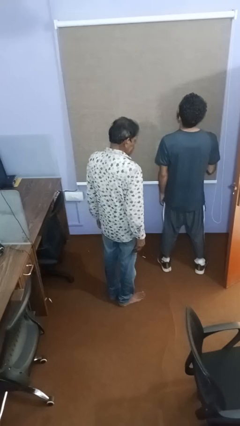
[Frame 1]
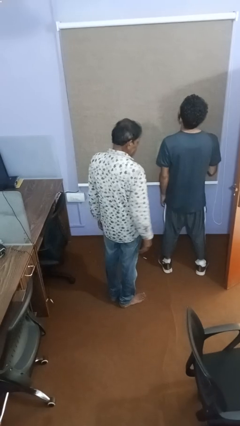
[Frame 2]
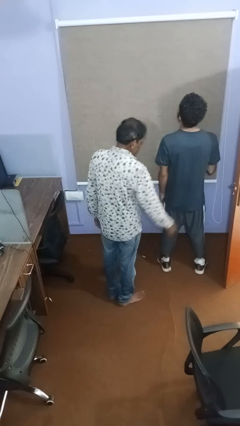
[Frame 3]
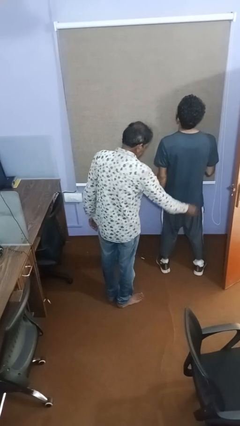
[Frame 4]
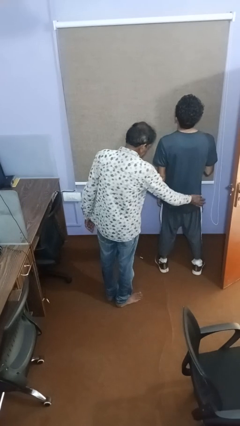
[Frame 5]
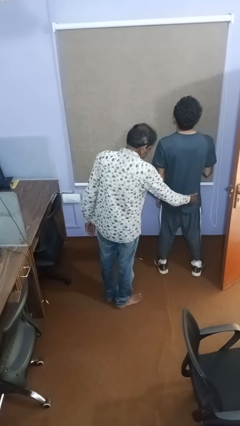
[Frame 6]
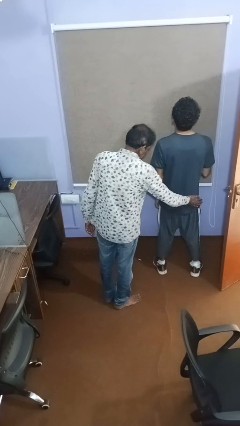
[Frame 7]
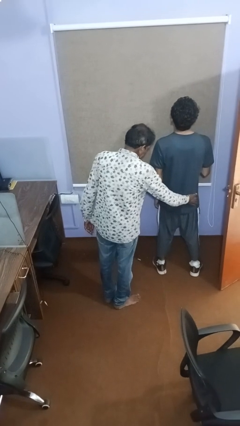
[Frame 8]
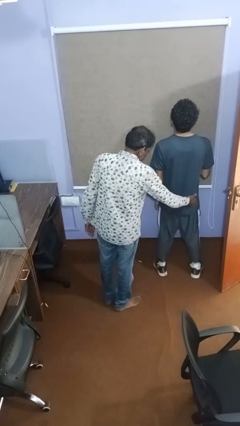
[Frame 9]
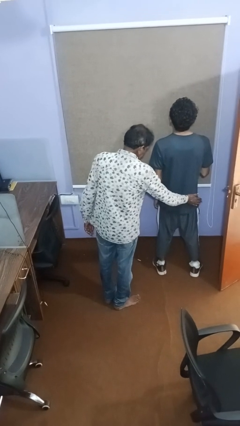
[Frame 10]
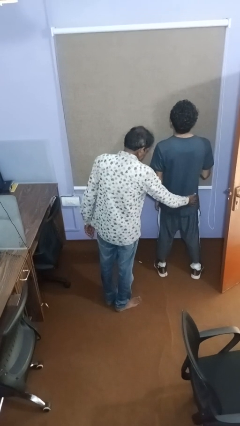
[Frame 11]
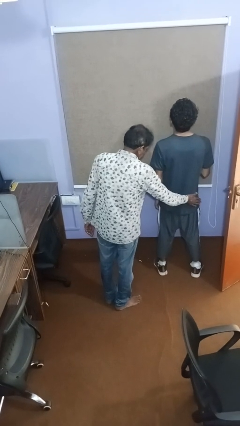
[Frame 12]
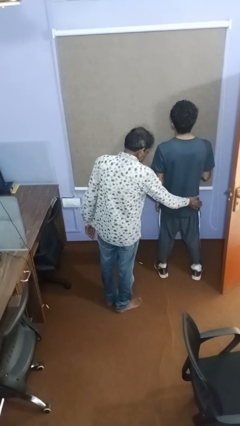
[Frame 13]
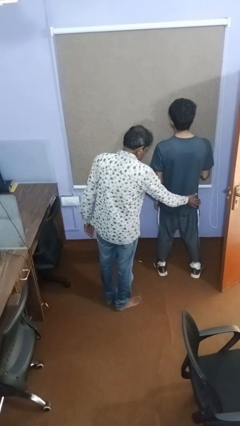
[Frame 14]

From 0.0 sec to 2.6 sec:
person touches back of person

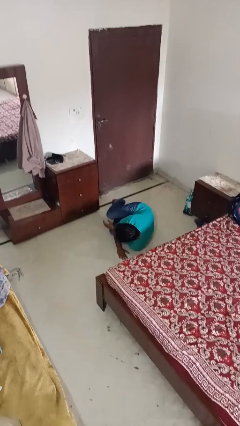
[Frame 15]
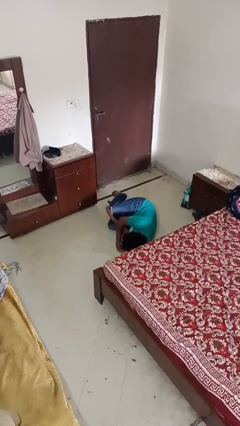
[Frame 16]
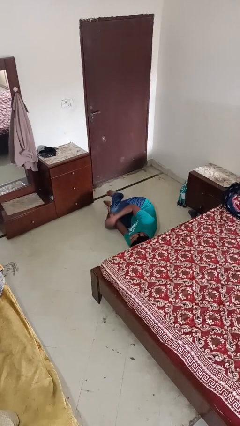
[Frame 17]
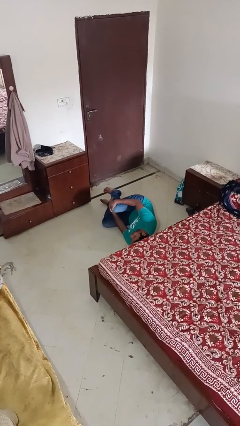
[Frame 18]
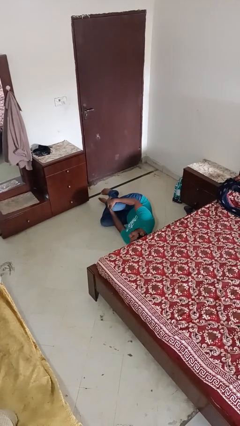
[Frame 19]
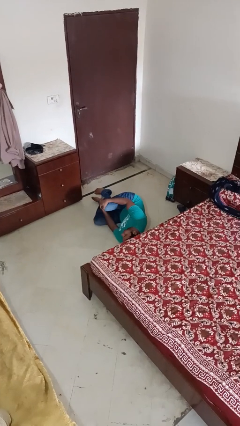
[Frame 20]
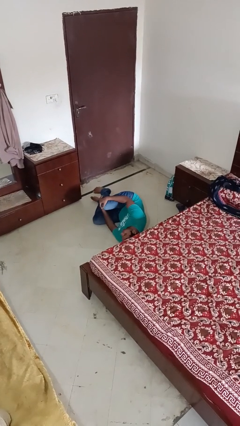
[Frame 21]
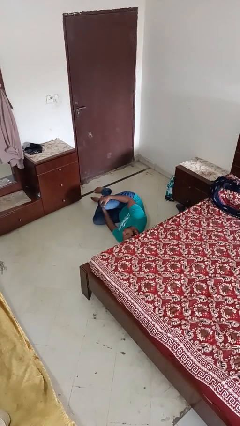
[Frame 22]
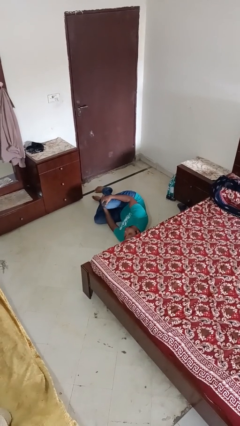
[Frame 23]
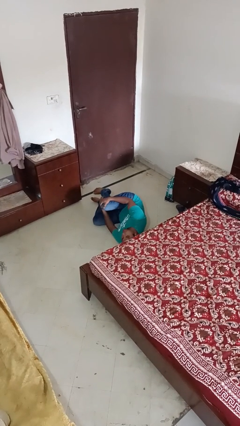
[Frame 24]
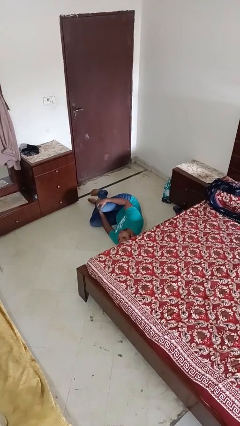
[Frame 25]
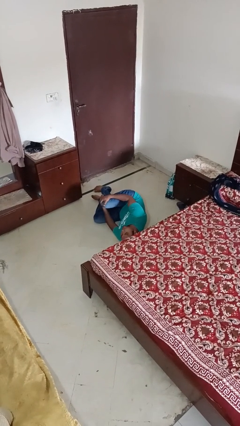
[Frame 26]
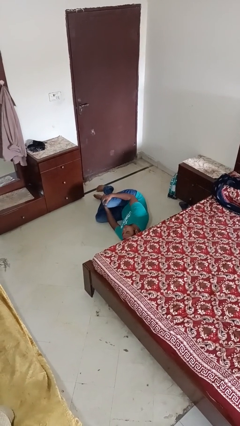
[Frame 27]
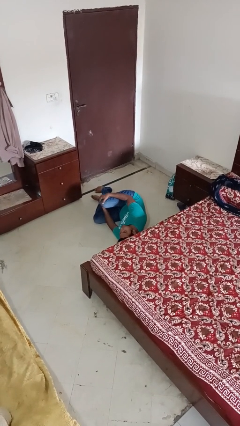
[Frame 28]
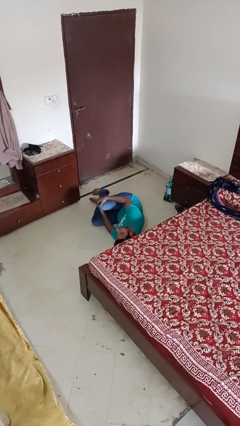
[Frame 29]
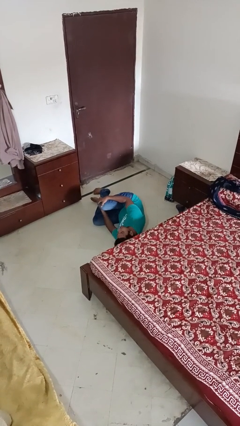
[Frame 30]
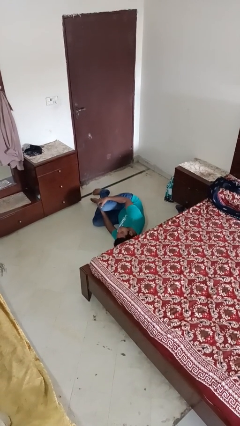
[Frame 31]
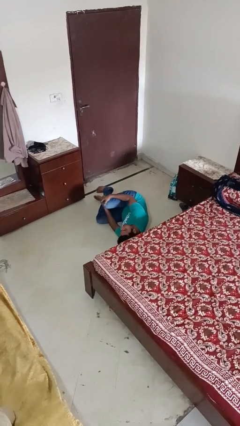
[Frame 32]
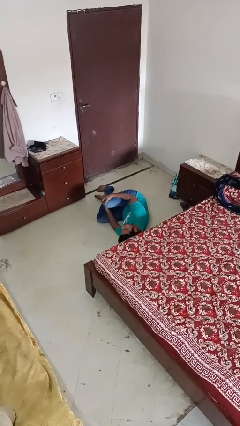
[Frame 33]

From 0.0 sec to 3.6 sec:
person lies down on floor

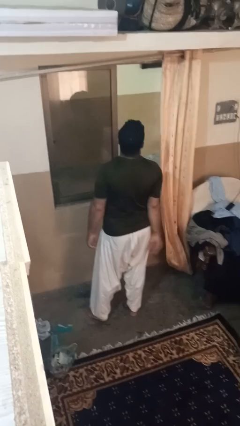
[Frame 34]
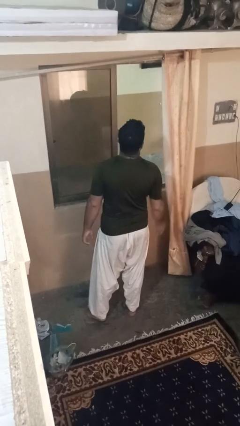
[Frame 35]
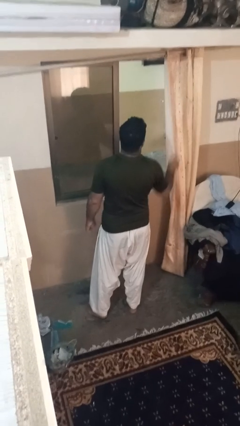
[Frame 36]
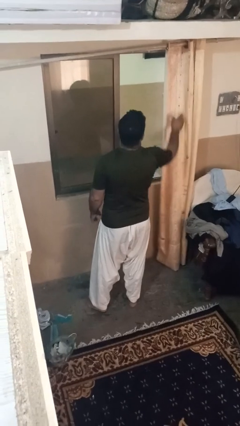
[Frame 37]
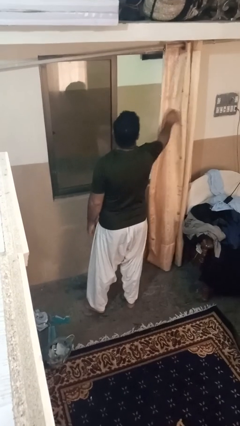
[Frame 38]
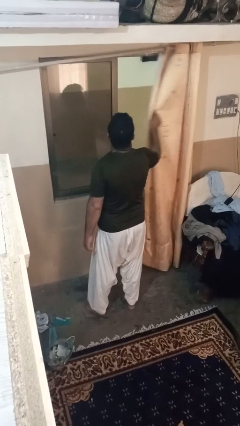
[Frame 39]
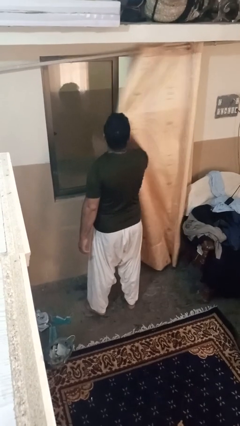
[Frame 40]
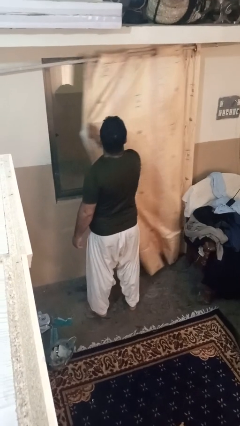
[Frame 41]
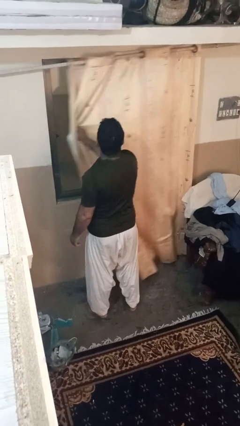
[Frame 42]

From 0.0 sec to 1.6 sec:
person closes curtains

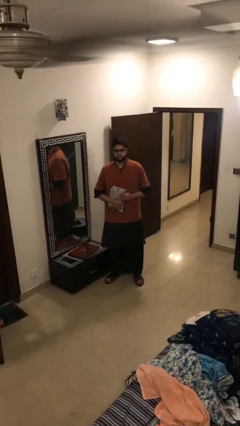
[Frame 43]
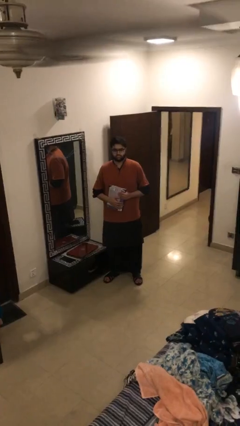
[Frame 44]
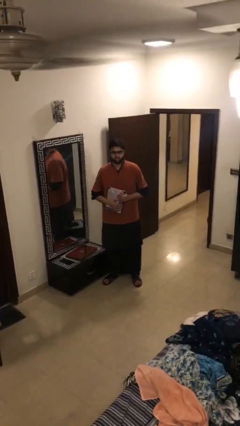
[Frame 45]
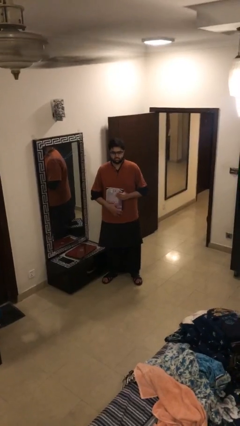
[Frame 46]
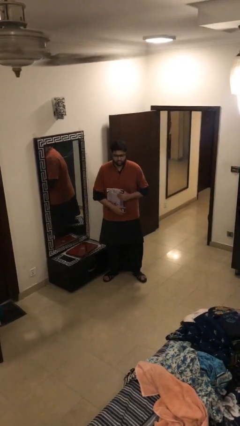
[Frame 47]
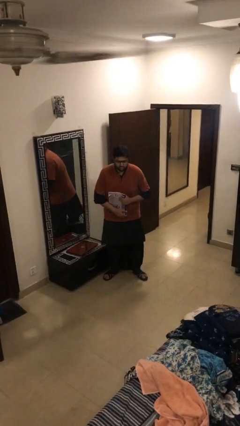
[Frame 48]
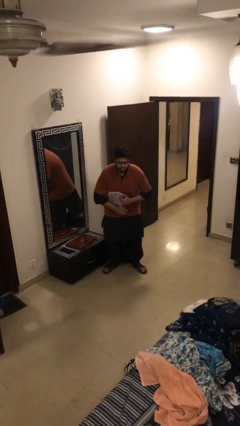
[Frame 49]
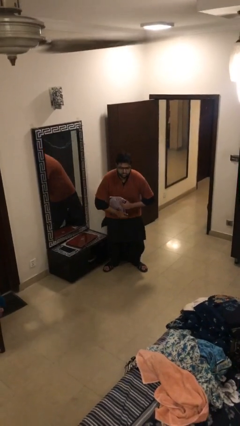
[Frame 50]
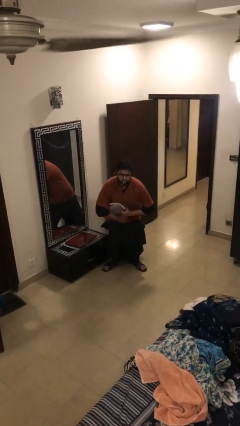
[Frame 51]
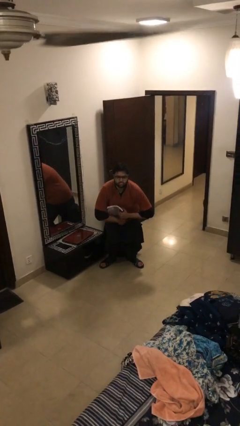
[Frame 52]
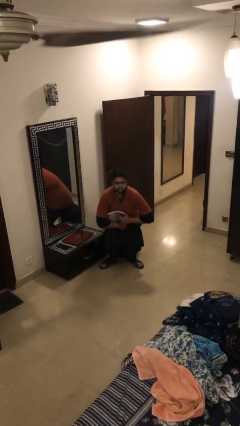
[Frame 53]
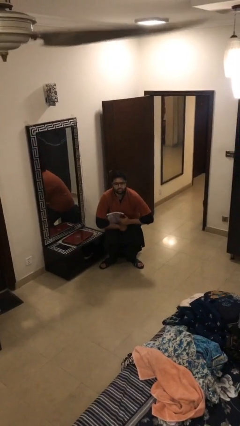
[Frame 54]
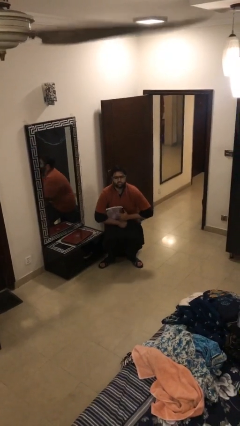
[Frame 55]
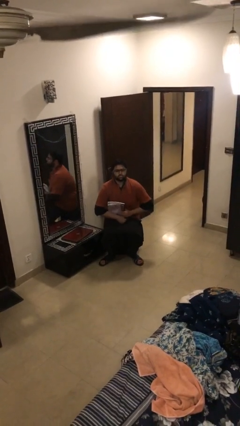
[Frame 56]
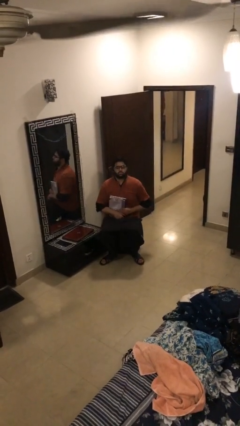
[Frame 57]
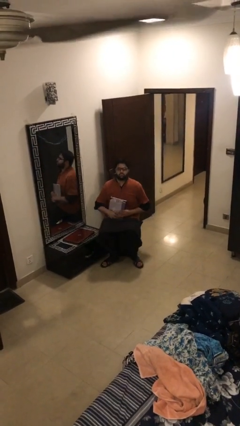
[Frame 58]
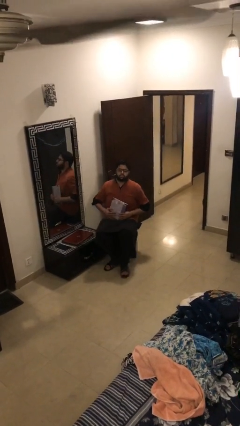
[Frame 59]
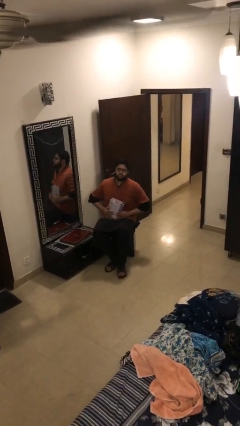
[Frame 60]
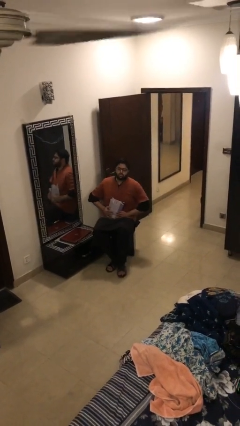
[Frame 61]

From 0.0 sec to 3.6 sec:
person sits down

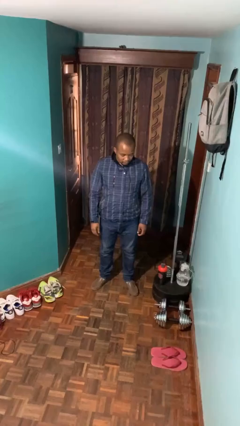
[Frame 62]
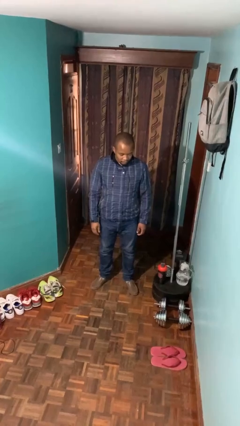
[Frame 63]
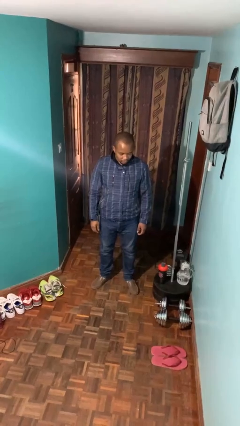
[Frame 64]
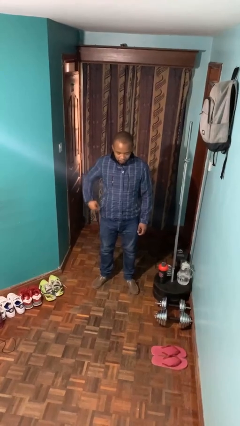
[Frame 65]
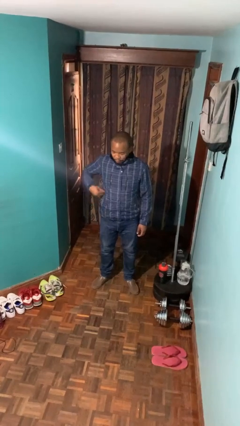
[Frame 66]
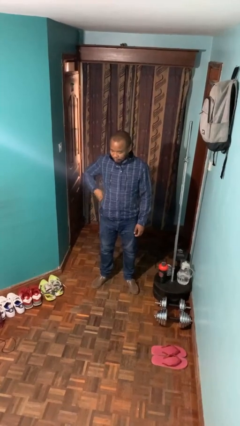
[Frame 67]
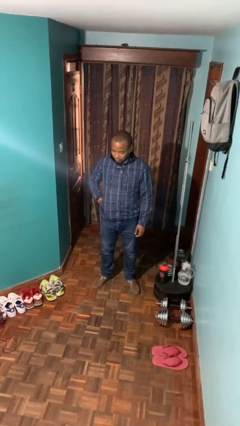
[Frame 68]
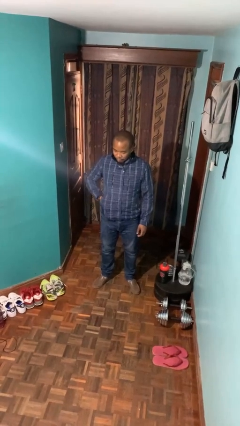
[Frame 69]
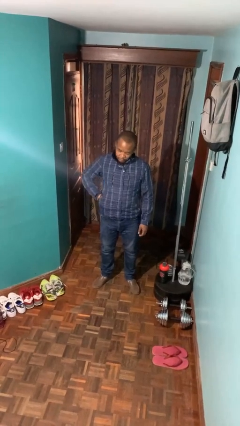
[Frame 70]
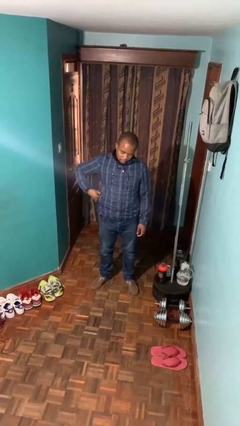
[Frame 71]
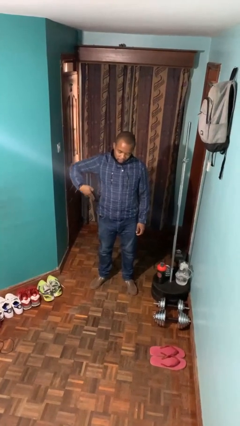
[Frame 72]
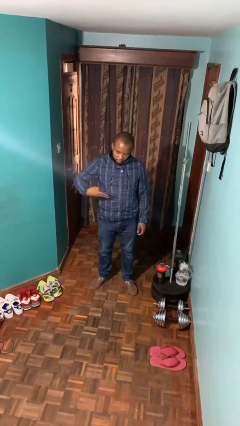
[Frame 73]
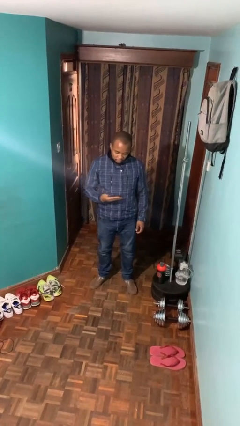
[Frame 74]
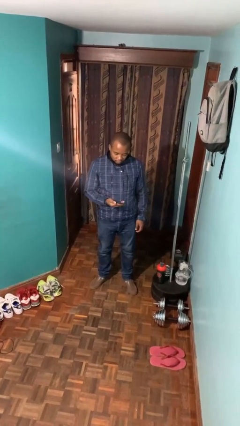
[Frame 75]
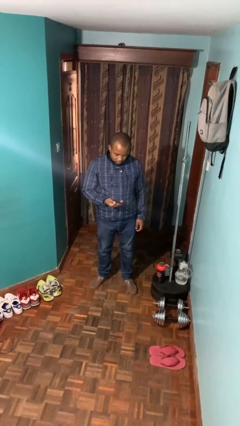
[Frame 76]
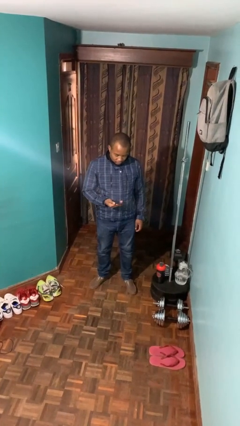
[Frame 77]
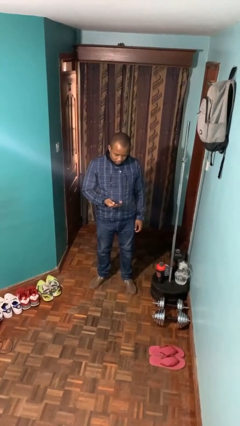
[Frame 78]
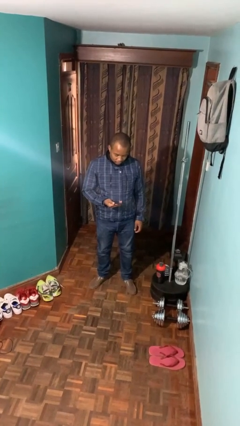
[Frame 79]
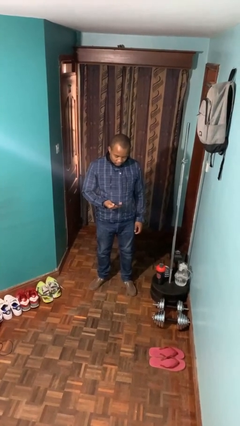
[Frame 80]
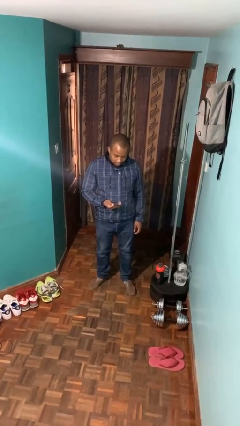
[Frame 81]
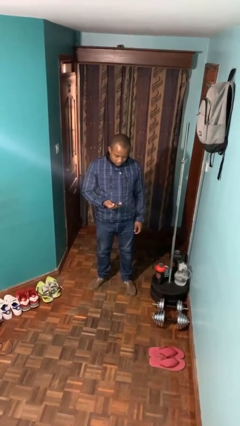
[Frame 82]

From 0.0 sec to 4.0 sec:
person takes phone from pocket

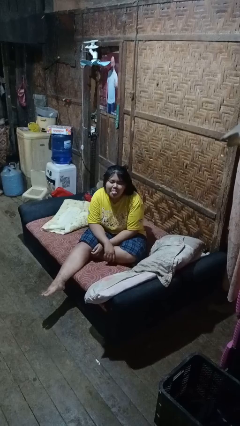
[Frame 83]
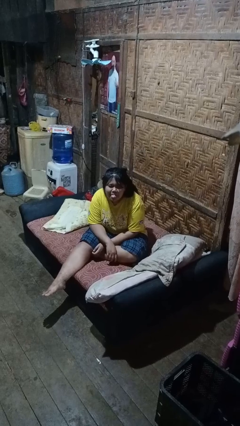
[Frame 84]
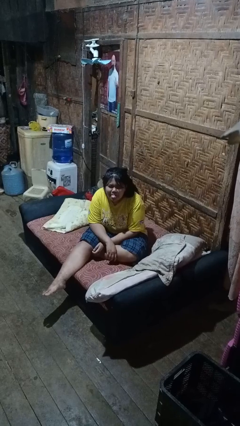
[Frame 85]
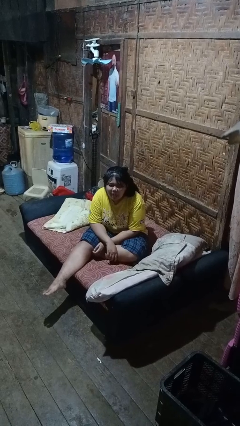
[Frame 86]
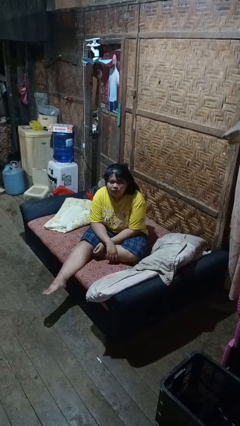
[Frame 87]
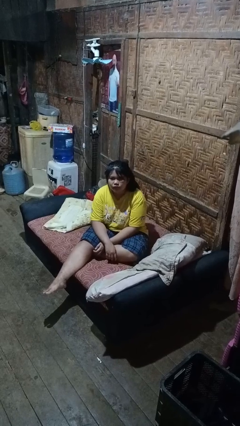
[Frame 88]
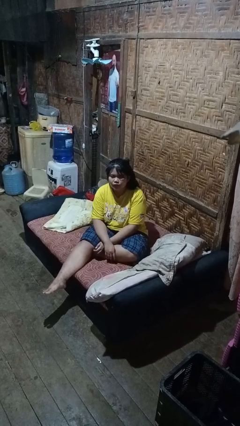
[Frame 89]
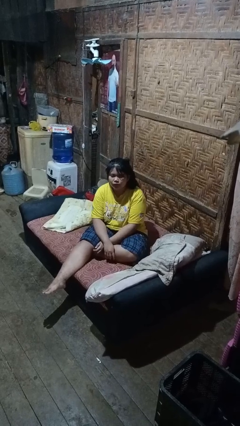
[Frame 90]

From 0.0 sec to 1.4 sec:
person sticks out tongue

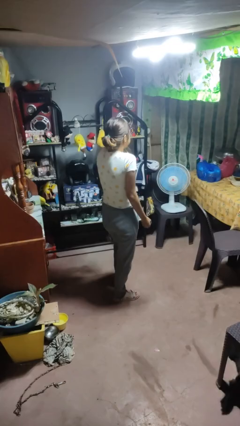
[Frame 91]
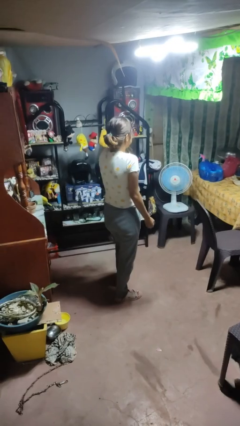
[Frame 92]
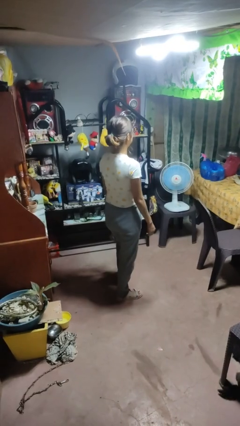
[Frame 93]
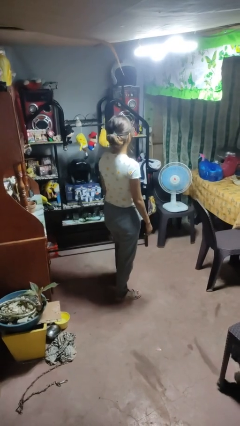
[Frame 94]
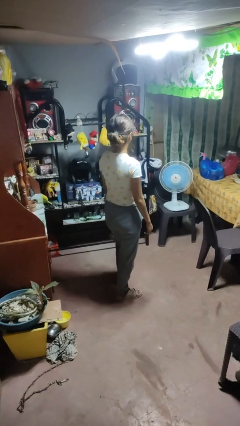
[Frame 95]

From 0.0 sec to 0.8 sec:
person shrugs
